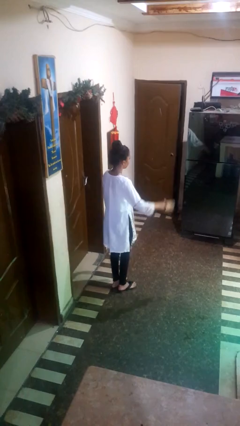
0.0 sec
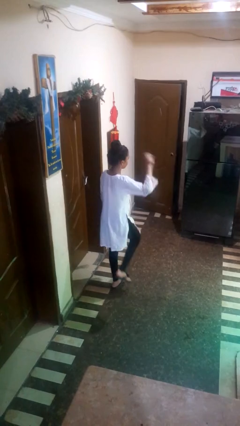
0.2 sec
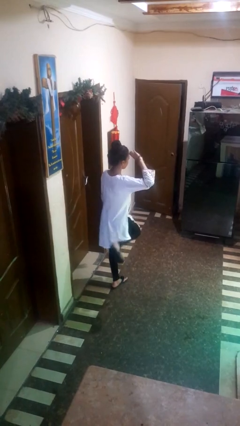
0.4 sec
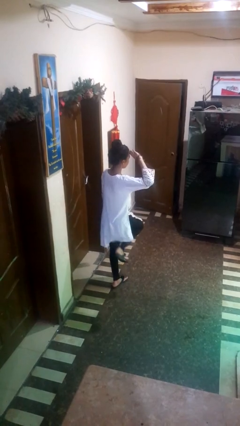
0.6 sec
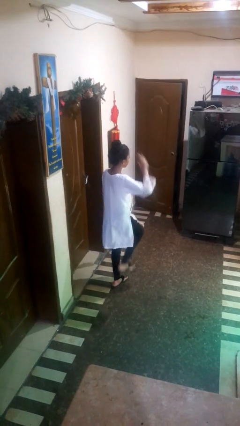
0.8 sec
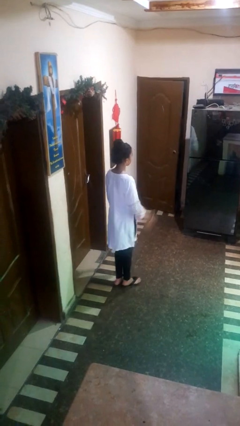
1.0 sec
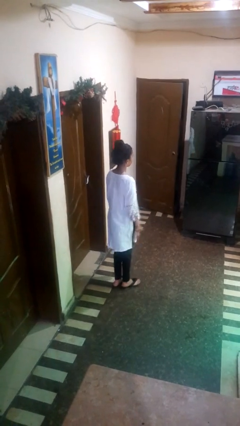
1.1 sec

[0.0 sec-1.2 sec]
person salutes

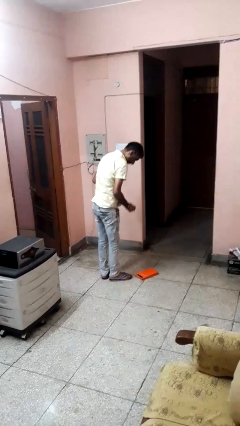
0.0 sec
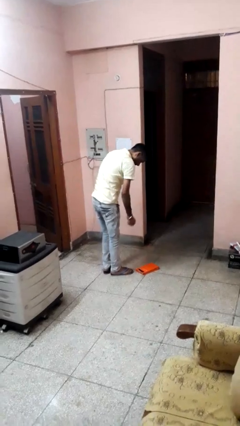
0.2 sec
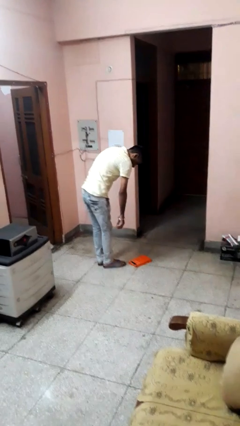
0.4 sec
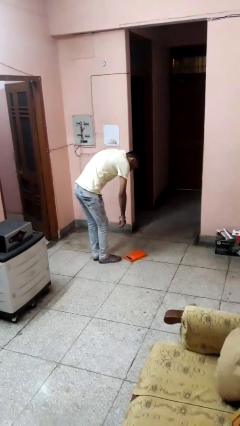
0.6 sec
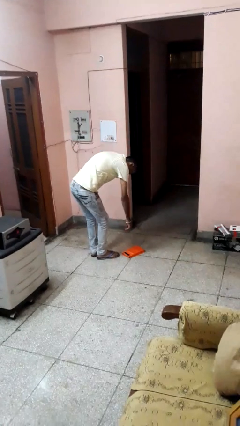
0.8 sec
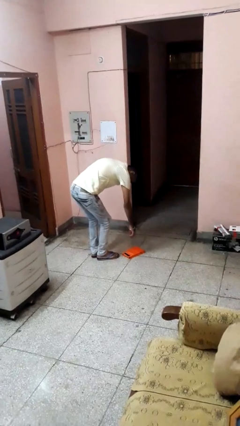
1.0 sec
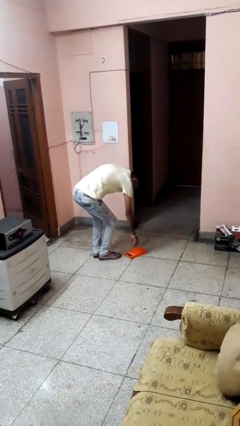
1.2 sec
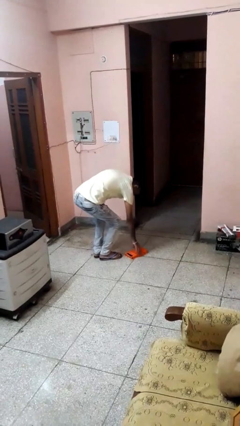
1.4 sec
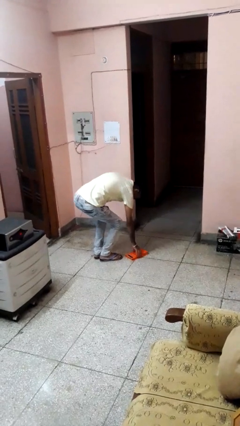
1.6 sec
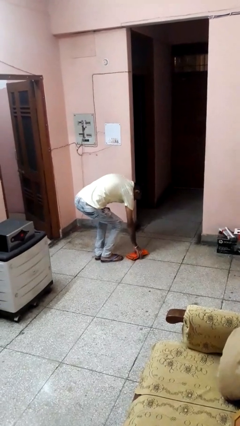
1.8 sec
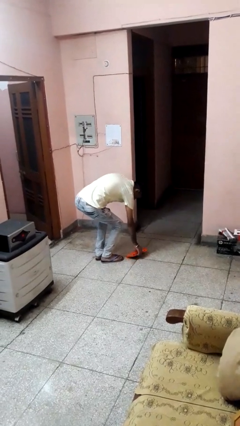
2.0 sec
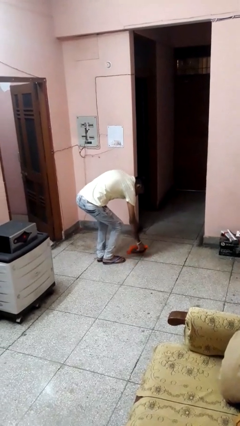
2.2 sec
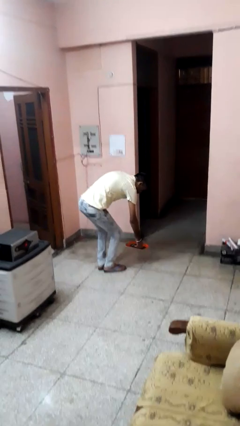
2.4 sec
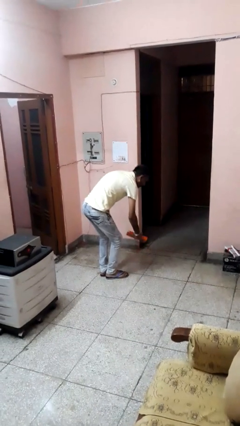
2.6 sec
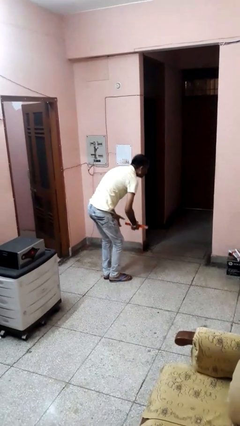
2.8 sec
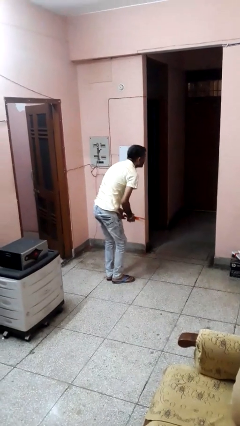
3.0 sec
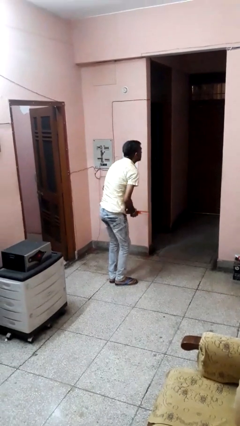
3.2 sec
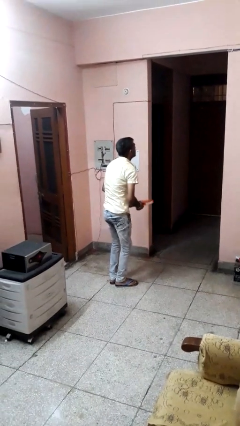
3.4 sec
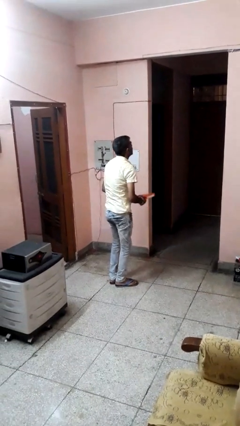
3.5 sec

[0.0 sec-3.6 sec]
person picks up object from floor

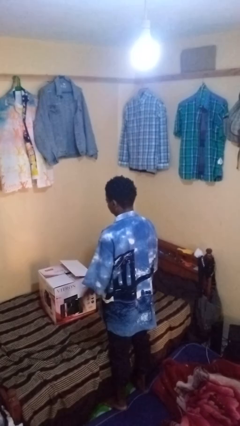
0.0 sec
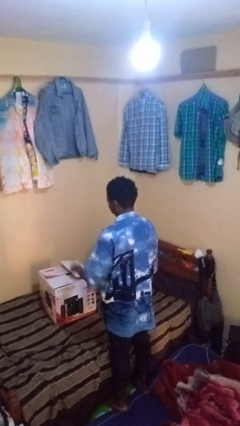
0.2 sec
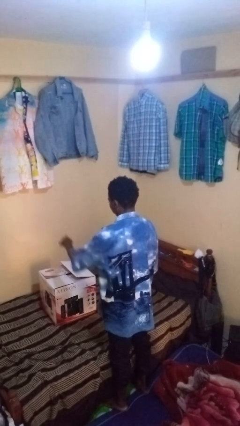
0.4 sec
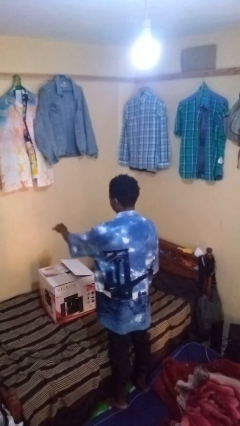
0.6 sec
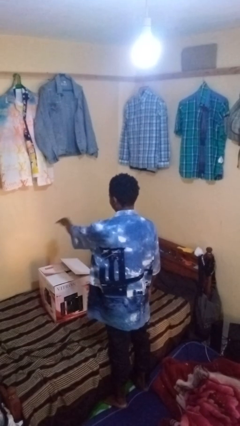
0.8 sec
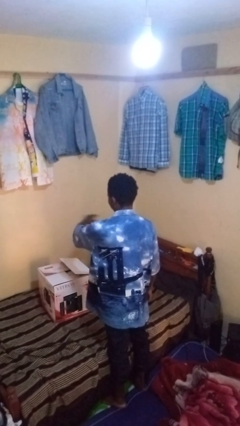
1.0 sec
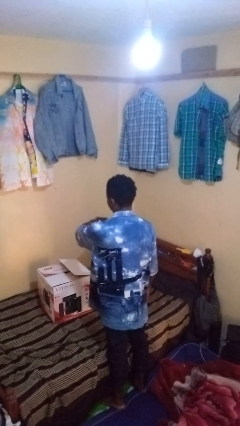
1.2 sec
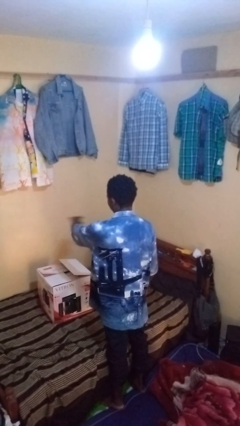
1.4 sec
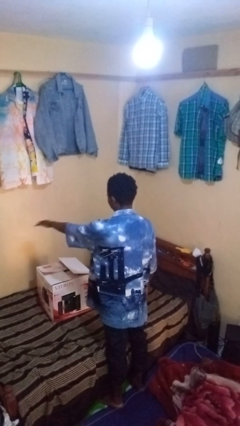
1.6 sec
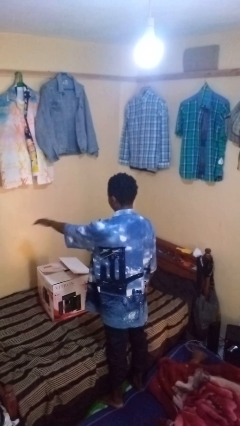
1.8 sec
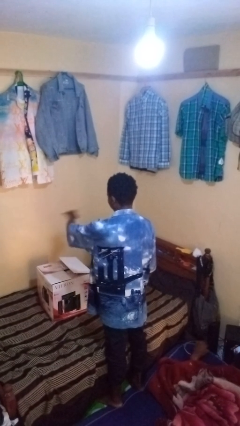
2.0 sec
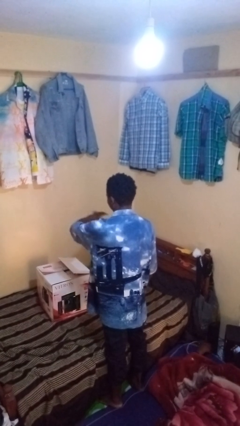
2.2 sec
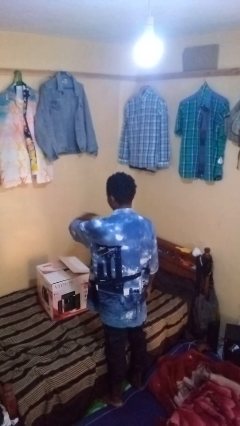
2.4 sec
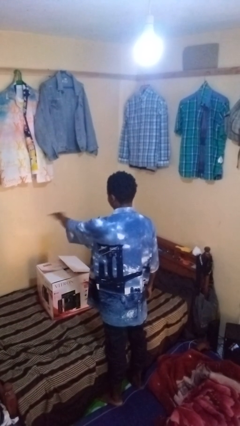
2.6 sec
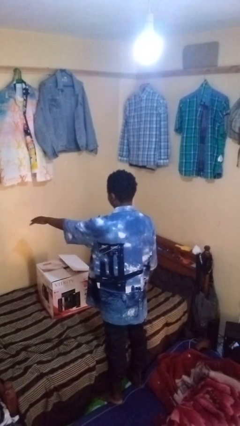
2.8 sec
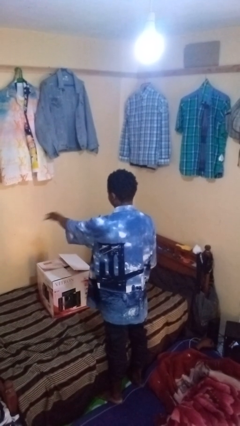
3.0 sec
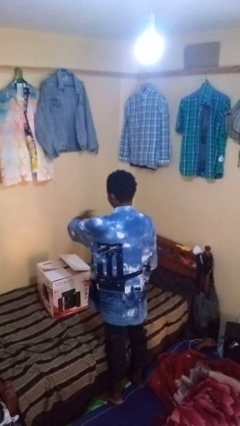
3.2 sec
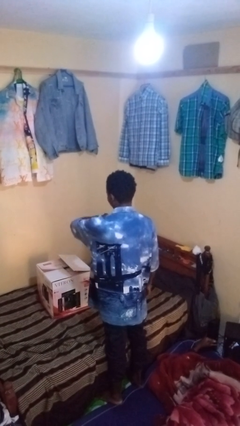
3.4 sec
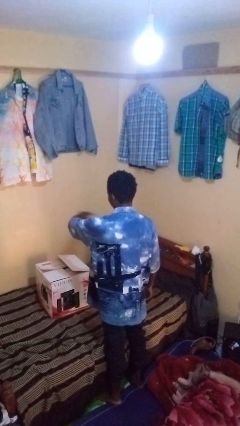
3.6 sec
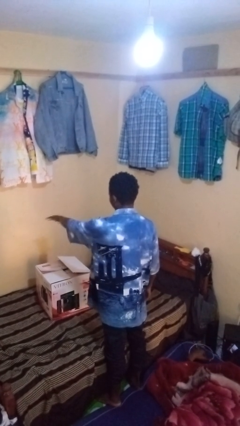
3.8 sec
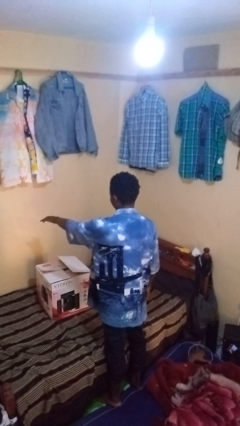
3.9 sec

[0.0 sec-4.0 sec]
person waves hand over object

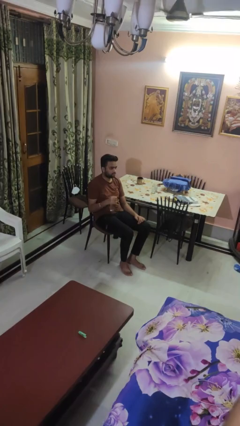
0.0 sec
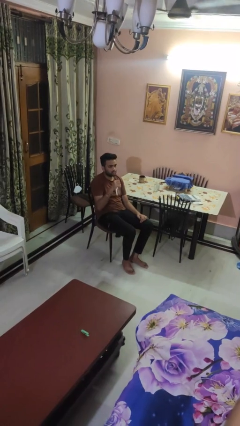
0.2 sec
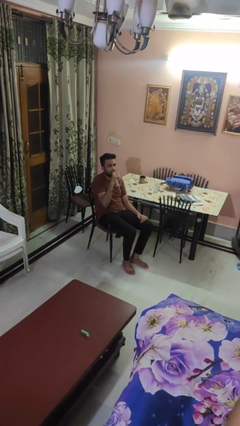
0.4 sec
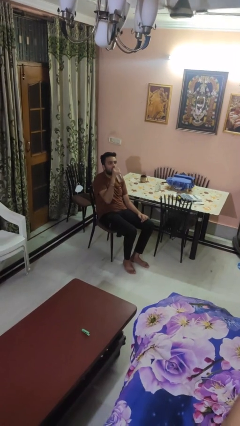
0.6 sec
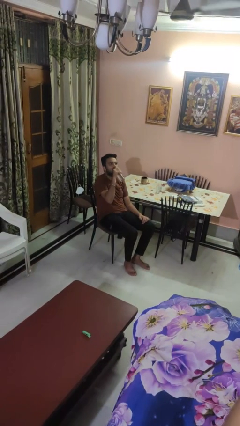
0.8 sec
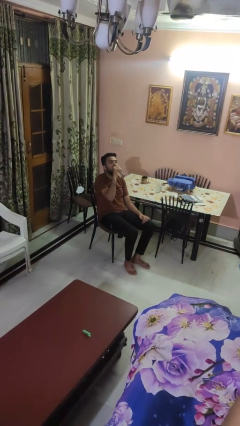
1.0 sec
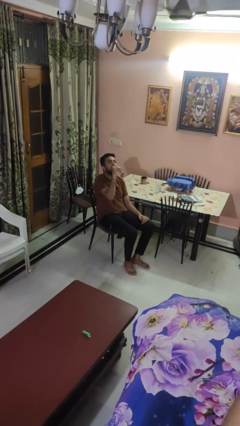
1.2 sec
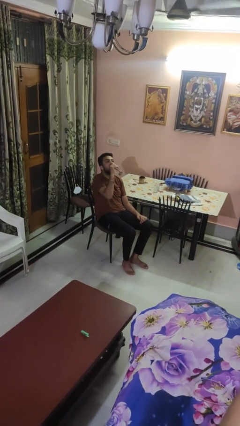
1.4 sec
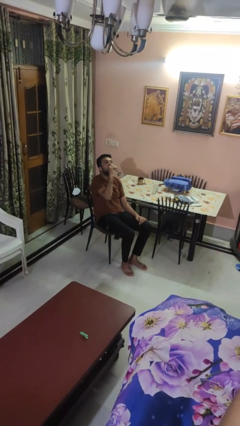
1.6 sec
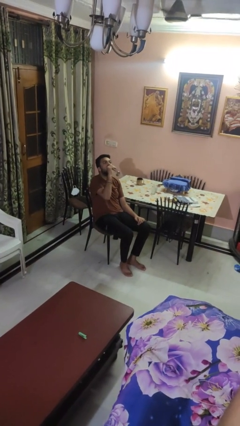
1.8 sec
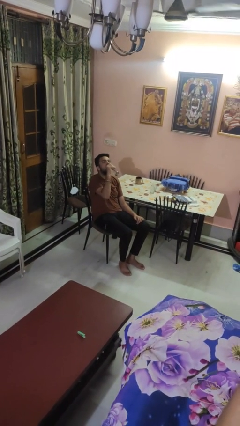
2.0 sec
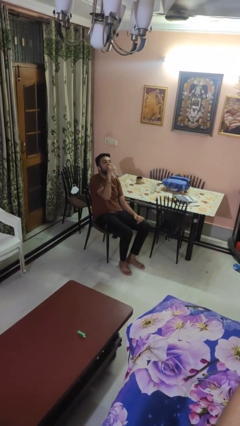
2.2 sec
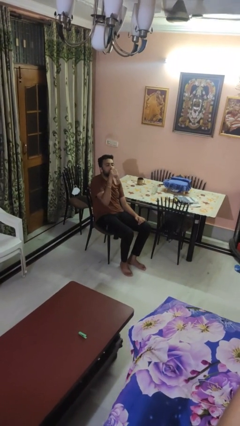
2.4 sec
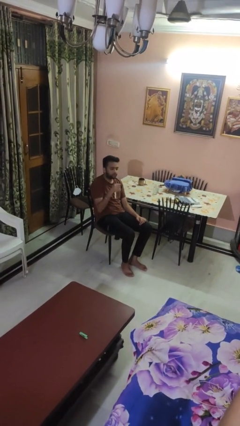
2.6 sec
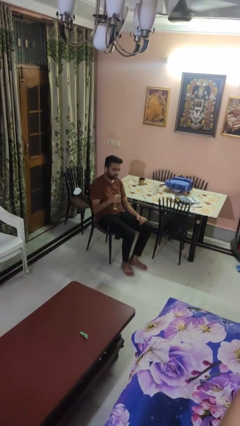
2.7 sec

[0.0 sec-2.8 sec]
person drinks from bottle

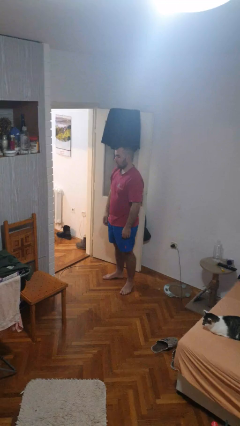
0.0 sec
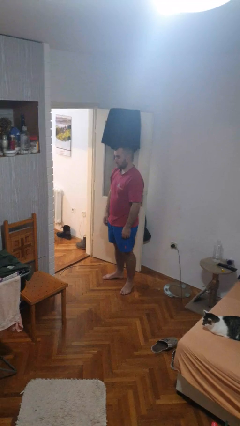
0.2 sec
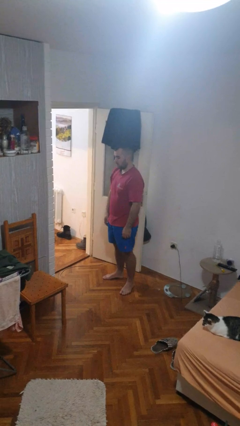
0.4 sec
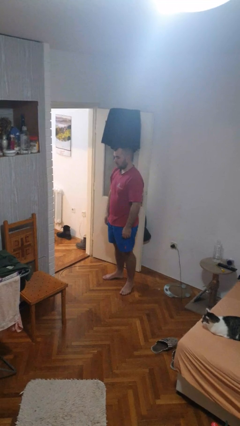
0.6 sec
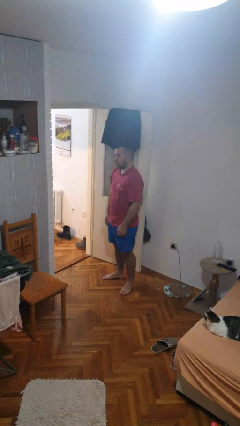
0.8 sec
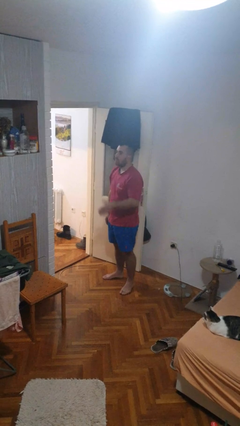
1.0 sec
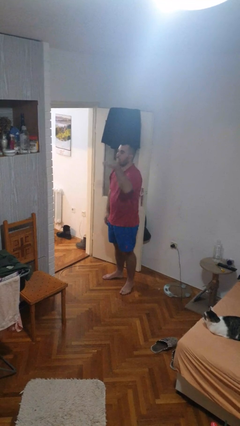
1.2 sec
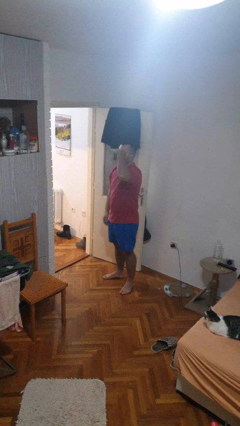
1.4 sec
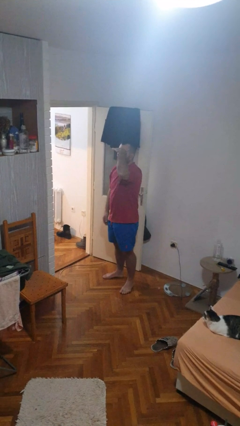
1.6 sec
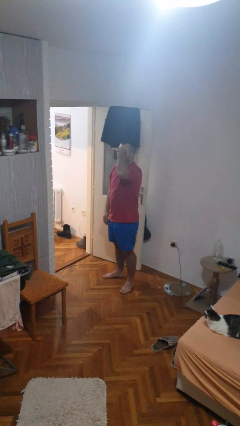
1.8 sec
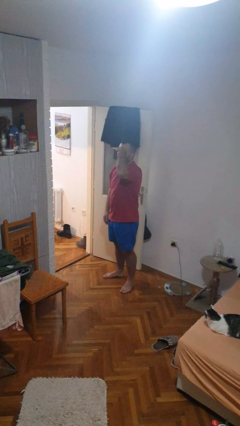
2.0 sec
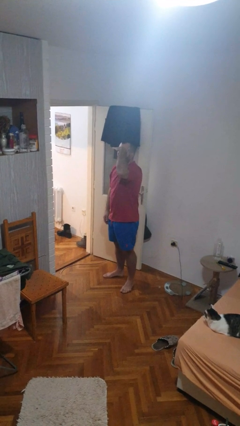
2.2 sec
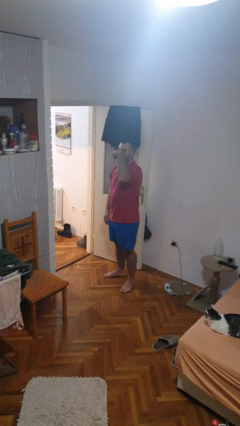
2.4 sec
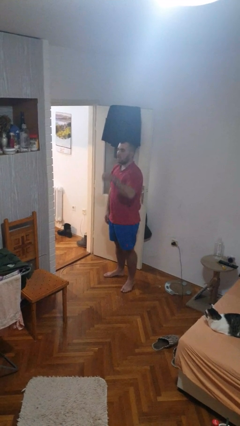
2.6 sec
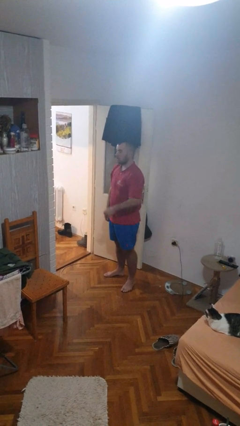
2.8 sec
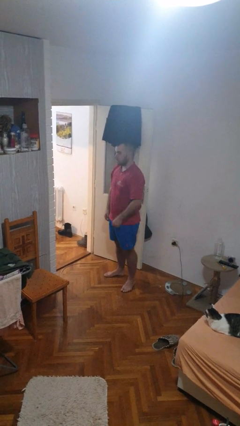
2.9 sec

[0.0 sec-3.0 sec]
person shades eyes

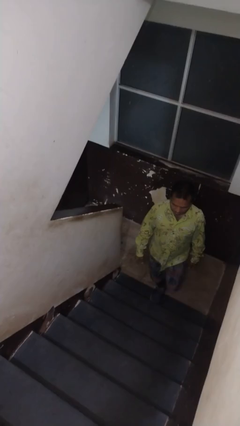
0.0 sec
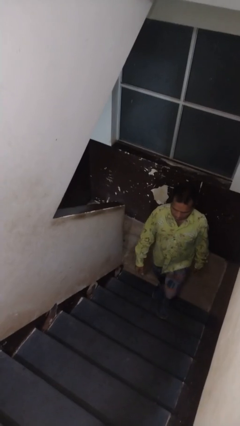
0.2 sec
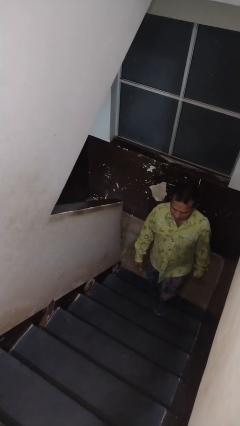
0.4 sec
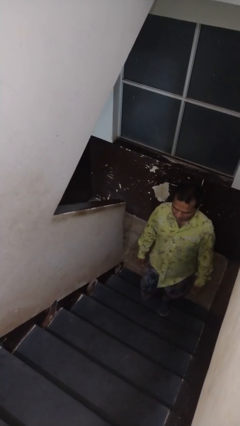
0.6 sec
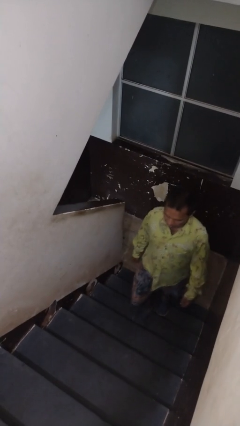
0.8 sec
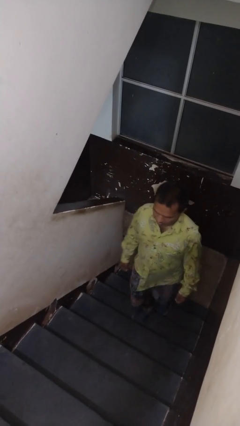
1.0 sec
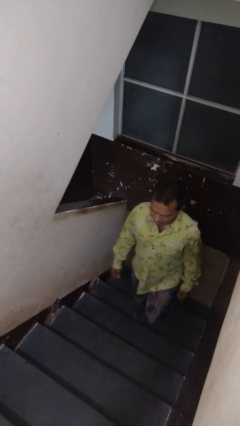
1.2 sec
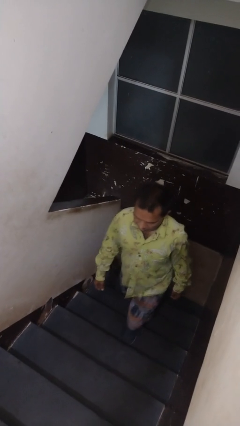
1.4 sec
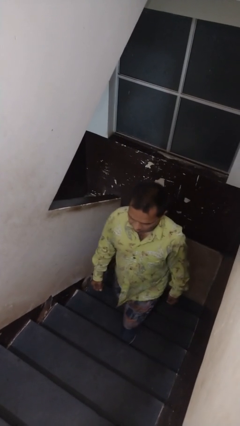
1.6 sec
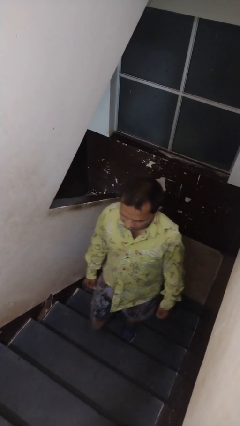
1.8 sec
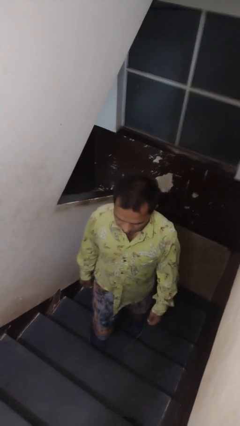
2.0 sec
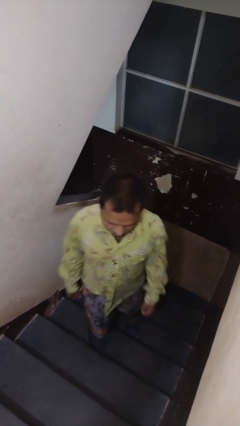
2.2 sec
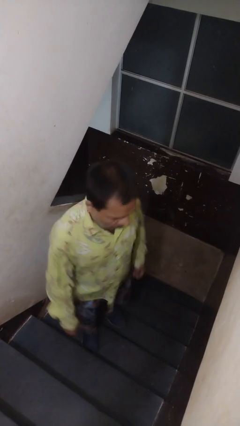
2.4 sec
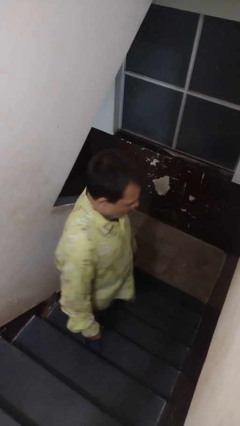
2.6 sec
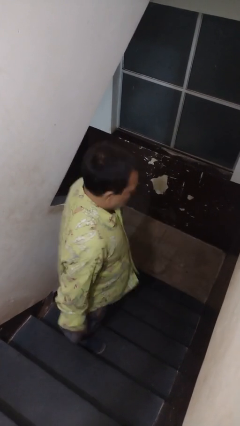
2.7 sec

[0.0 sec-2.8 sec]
person climbs up stairs
